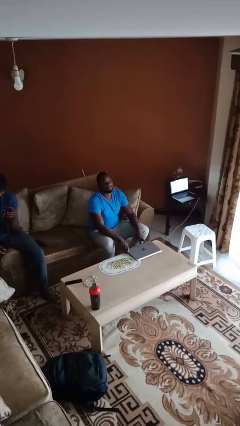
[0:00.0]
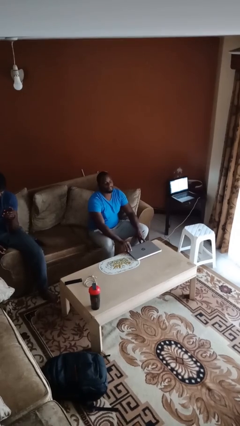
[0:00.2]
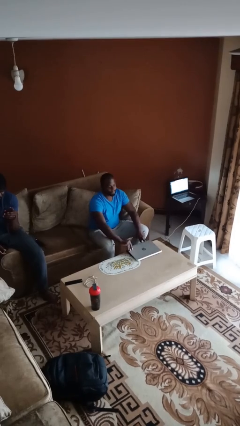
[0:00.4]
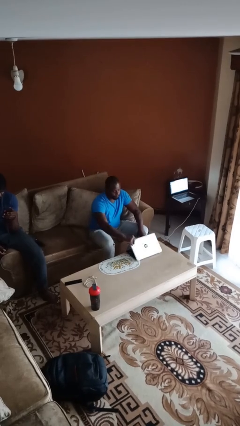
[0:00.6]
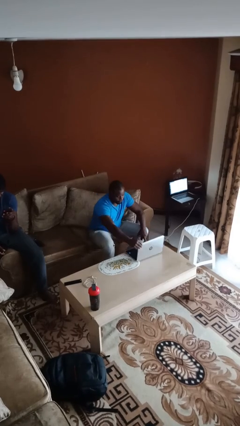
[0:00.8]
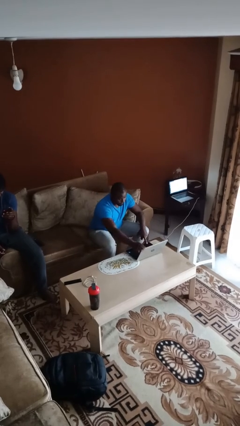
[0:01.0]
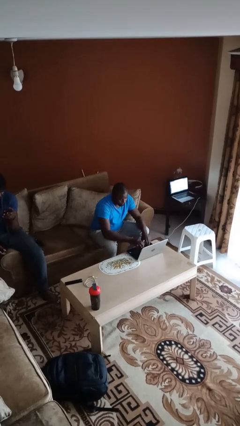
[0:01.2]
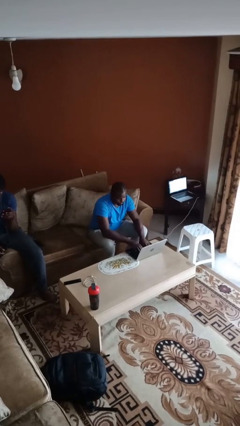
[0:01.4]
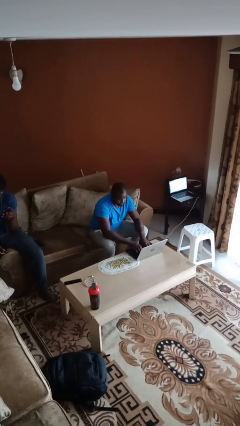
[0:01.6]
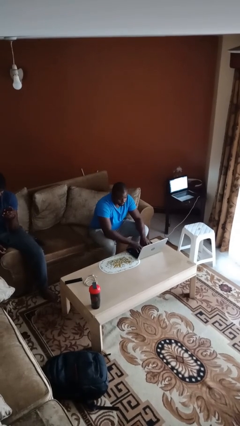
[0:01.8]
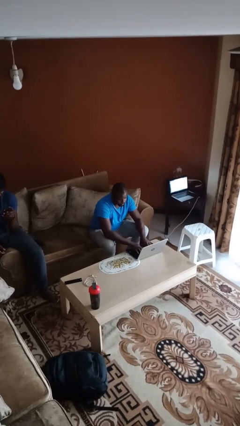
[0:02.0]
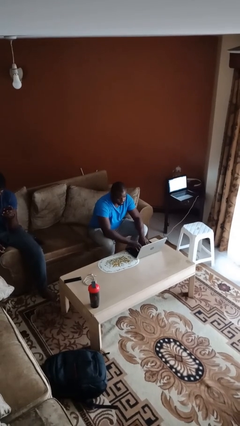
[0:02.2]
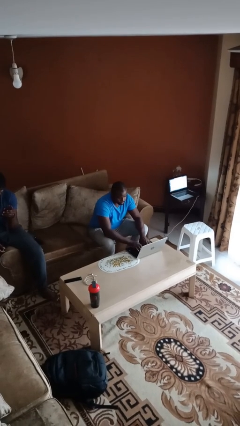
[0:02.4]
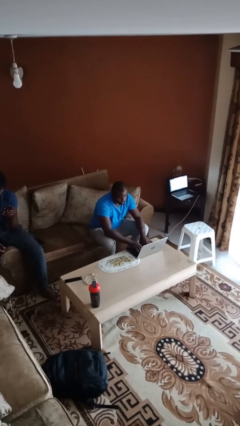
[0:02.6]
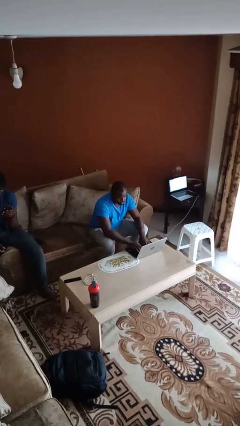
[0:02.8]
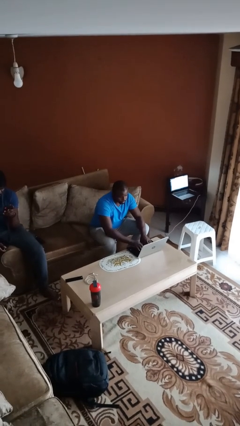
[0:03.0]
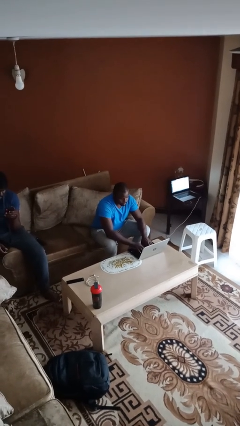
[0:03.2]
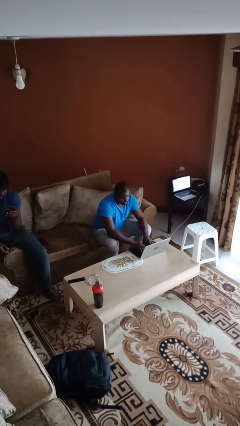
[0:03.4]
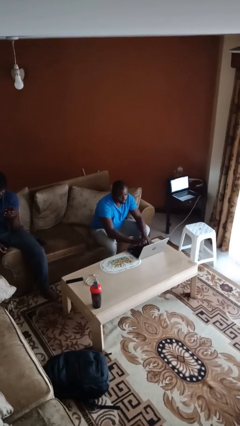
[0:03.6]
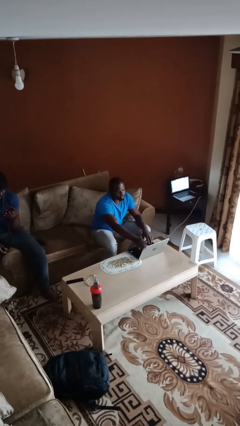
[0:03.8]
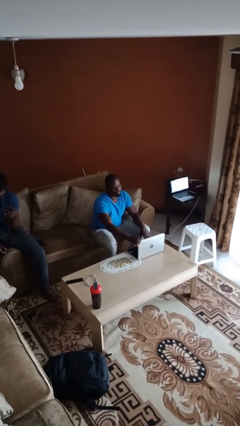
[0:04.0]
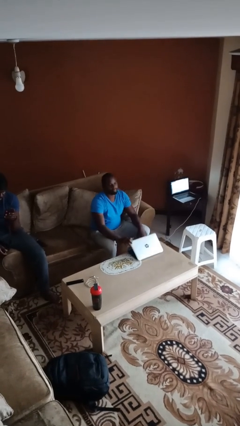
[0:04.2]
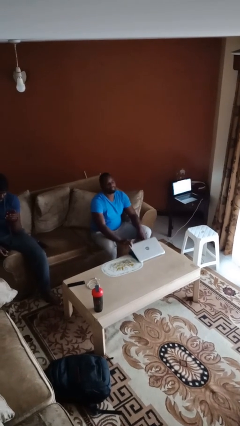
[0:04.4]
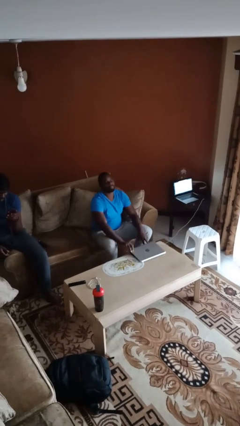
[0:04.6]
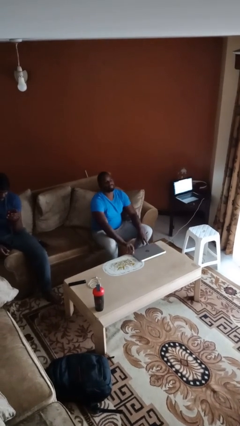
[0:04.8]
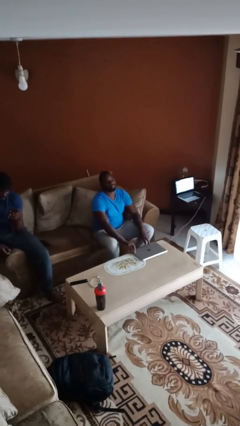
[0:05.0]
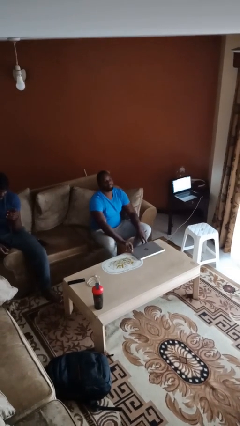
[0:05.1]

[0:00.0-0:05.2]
person interacts with laptop

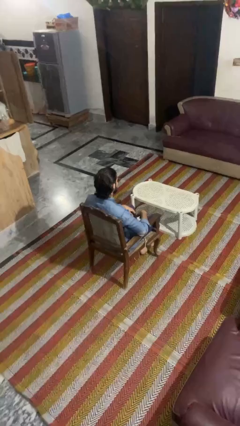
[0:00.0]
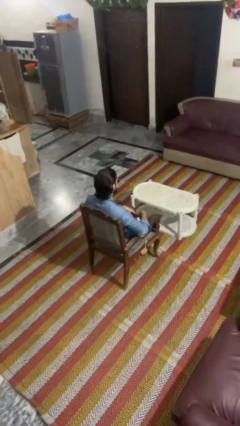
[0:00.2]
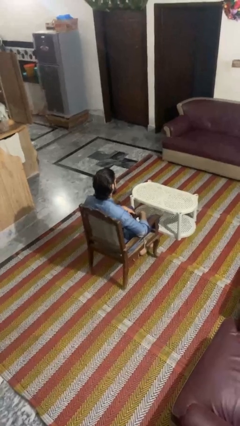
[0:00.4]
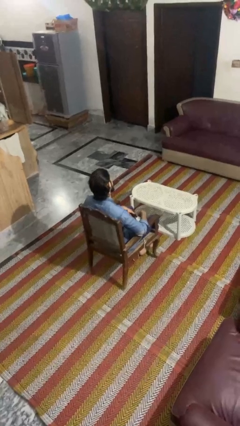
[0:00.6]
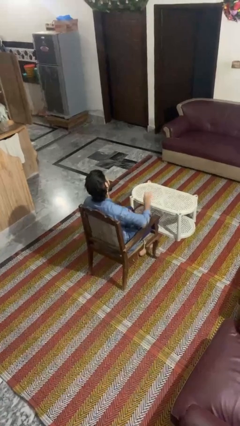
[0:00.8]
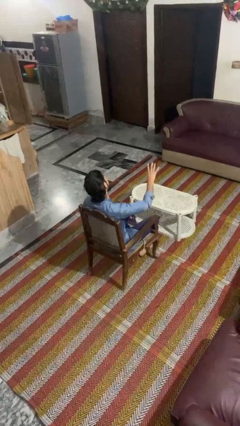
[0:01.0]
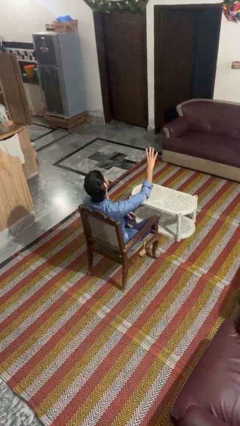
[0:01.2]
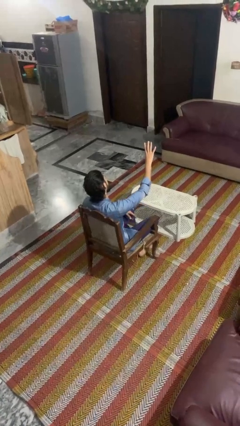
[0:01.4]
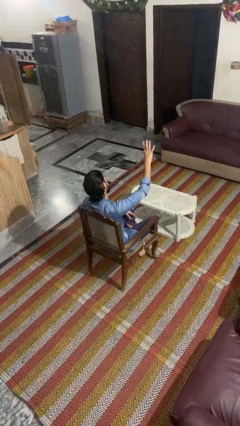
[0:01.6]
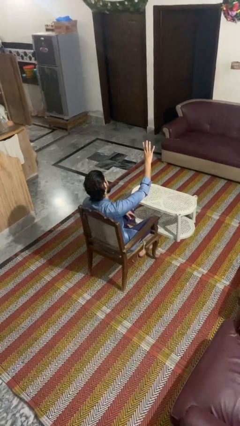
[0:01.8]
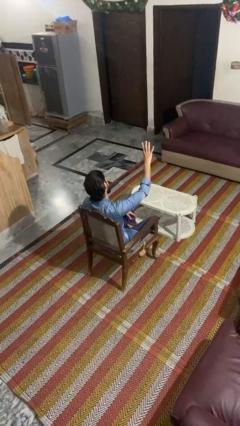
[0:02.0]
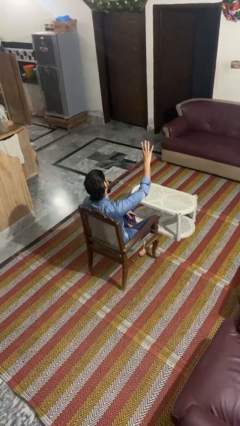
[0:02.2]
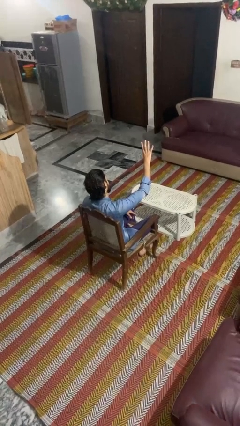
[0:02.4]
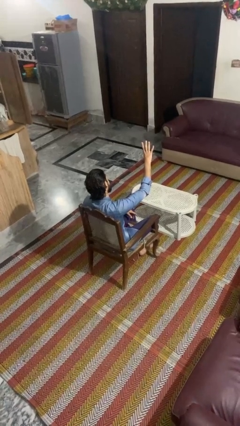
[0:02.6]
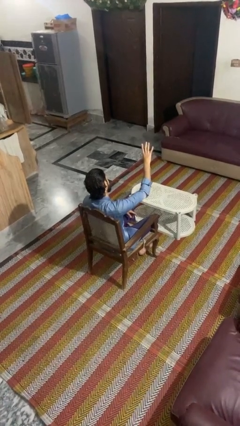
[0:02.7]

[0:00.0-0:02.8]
person gestures number four

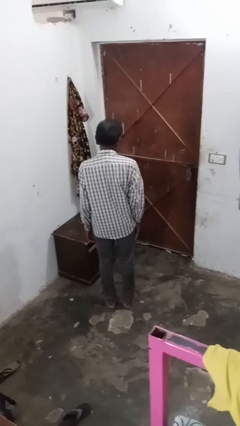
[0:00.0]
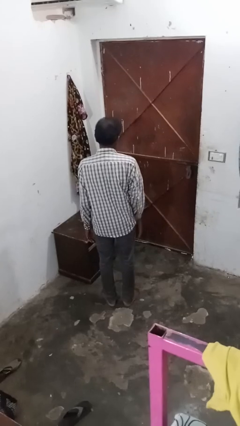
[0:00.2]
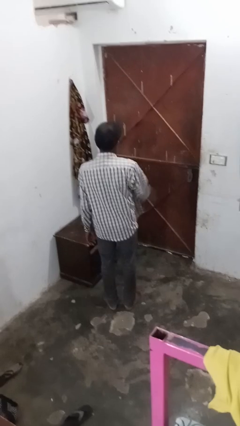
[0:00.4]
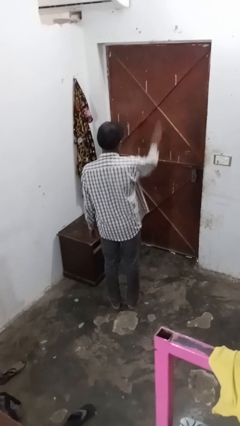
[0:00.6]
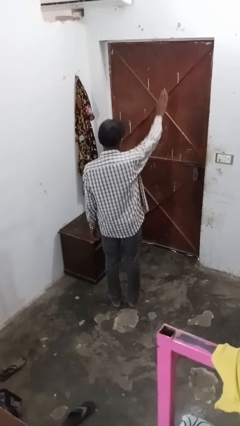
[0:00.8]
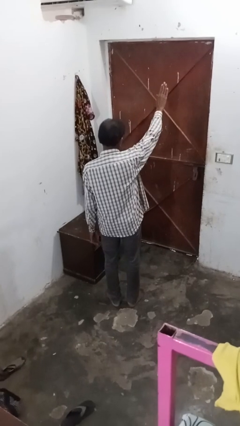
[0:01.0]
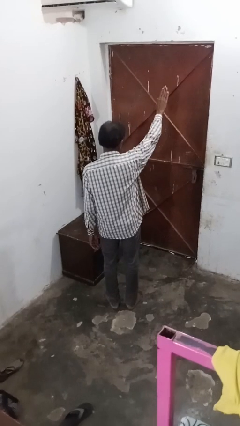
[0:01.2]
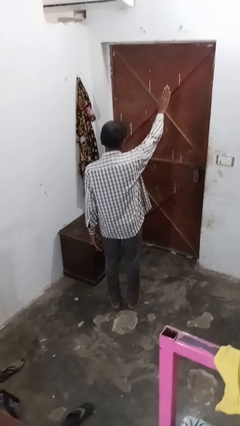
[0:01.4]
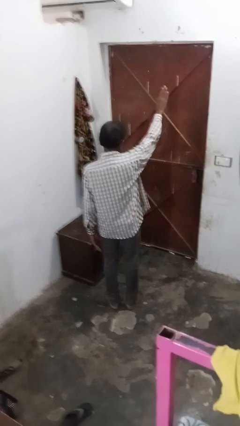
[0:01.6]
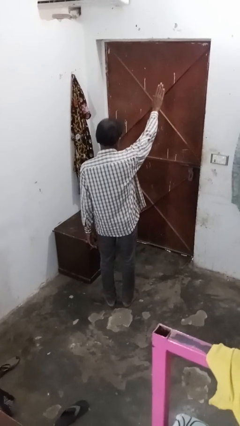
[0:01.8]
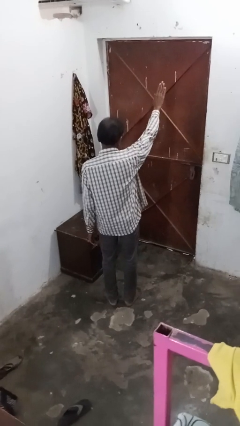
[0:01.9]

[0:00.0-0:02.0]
person gestures stop

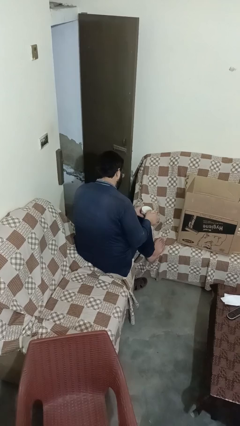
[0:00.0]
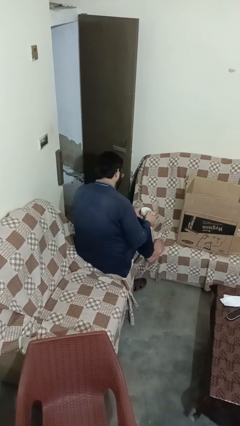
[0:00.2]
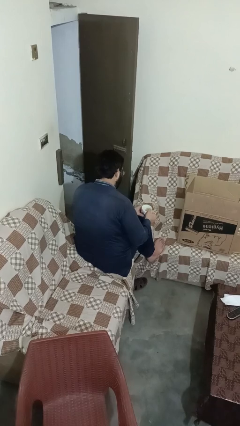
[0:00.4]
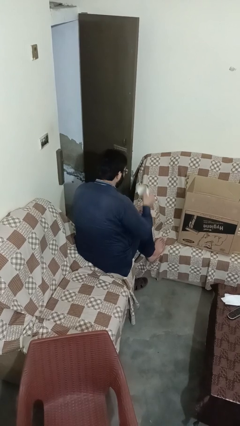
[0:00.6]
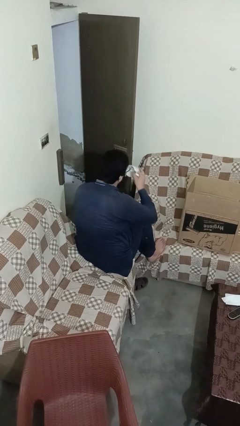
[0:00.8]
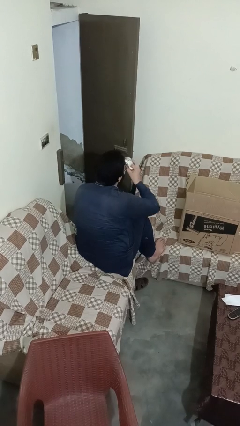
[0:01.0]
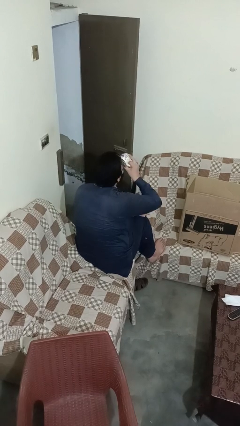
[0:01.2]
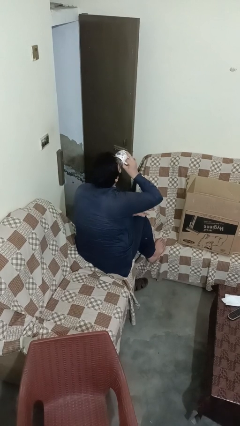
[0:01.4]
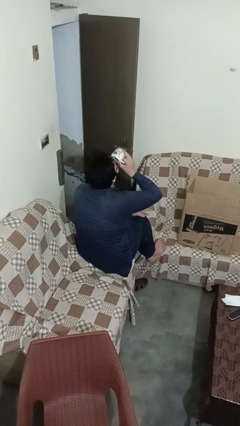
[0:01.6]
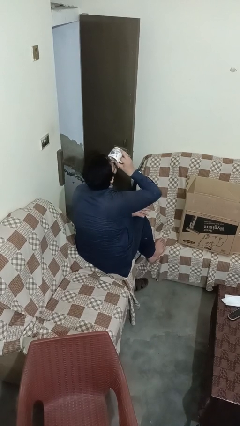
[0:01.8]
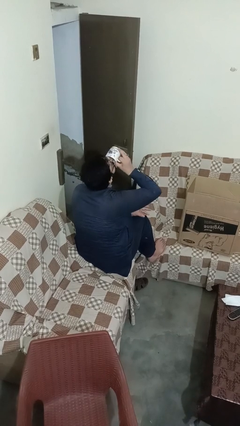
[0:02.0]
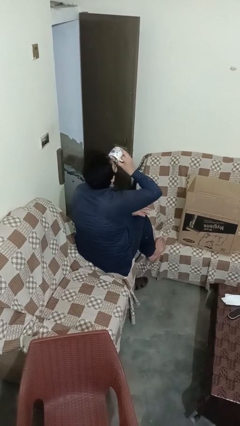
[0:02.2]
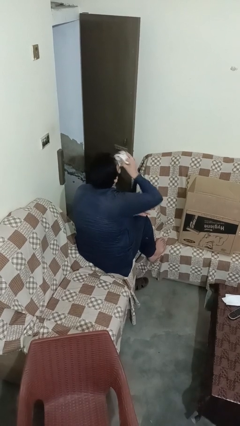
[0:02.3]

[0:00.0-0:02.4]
person drinks from mug

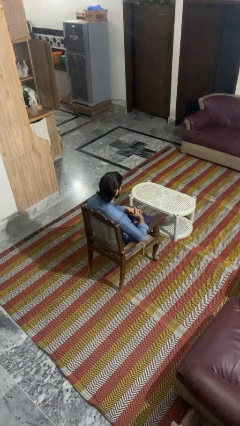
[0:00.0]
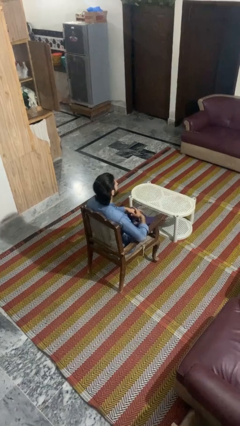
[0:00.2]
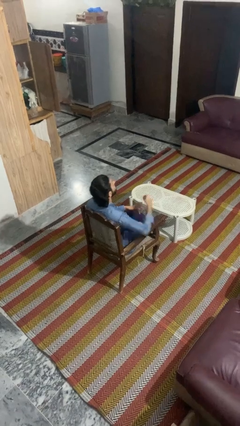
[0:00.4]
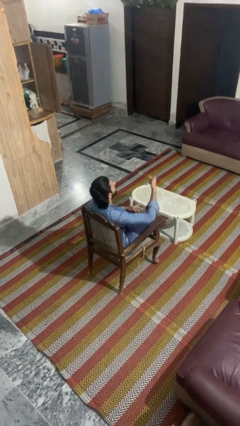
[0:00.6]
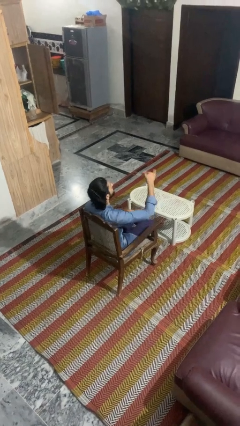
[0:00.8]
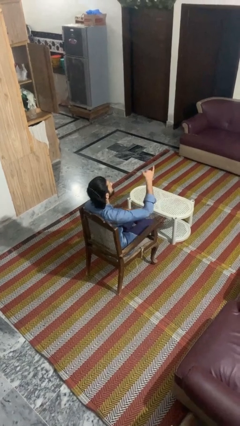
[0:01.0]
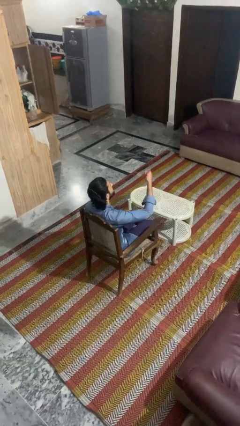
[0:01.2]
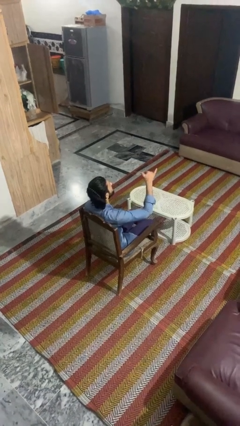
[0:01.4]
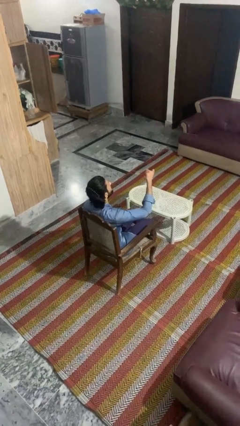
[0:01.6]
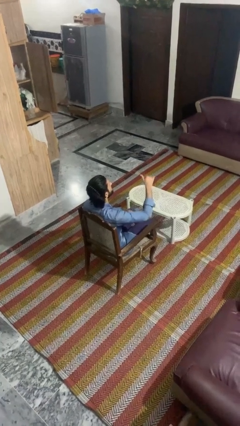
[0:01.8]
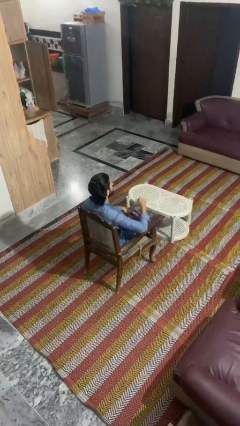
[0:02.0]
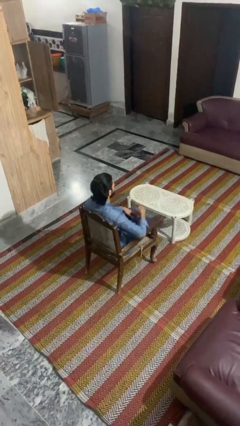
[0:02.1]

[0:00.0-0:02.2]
person gestures hang loose

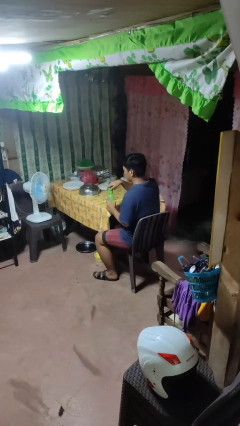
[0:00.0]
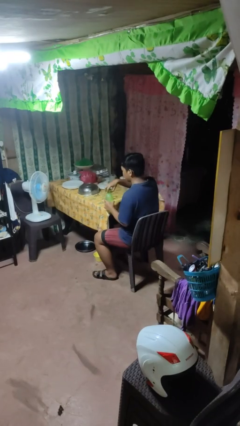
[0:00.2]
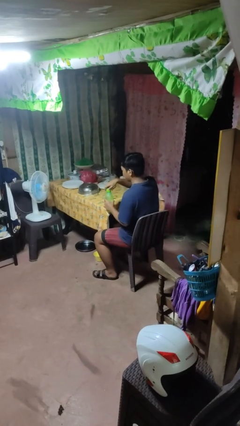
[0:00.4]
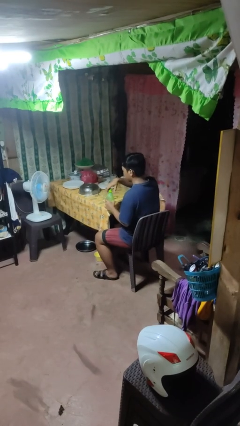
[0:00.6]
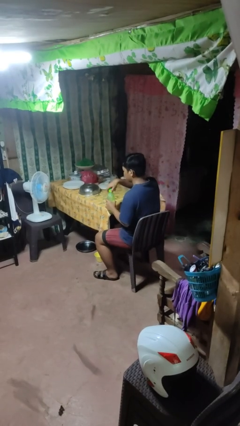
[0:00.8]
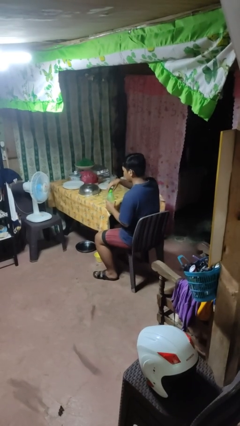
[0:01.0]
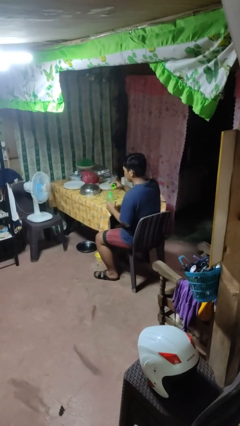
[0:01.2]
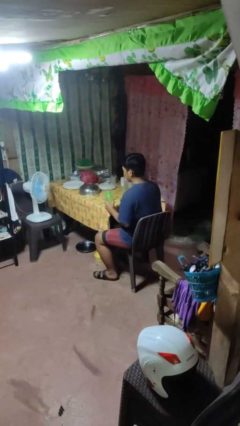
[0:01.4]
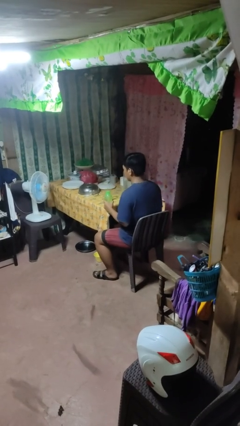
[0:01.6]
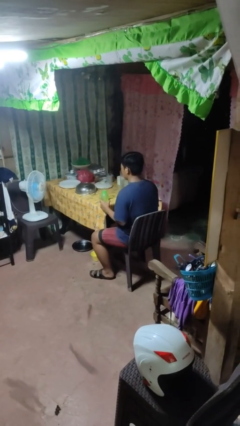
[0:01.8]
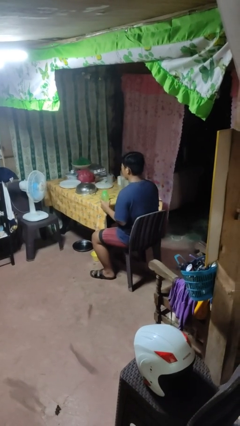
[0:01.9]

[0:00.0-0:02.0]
person unscrews lid from bottle

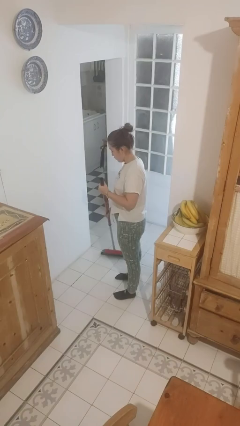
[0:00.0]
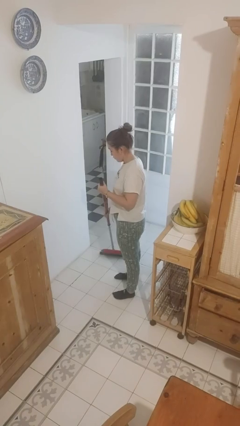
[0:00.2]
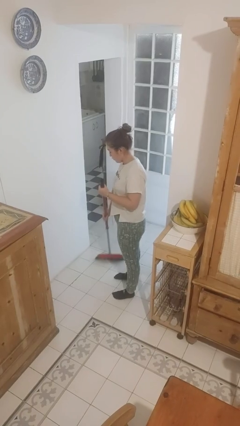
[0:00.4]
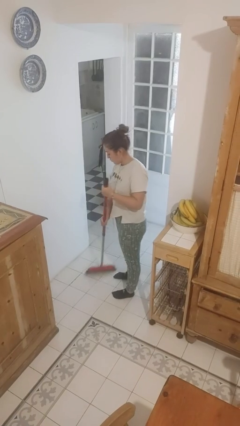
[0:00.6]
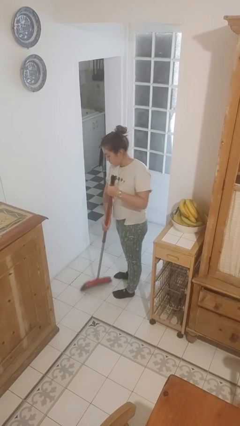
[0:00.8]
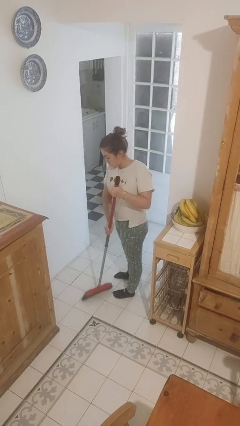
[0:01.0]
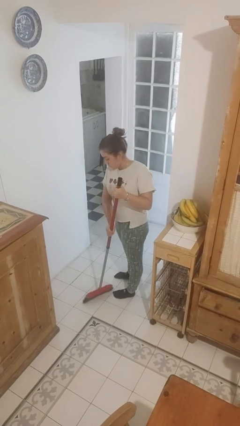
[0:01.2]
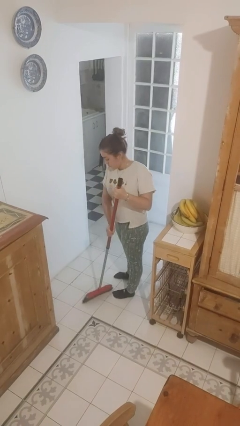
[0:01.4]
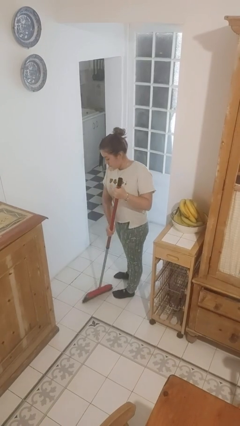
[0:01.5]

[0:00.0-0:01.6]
person sweeps floor
